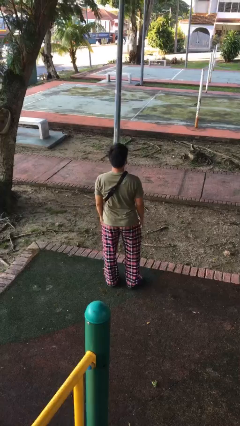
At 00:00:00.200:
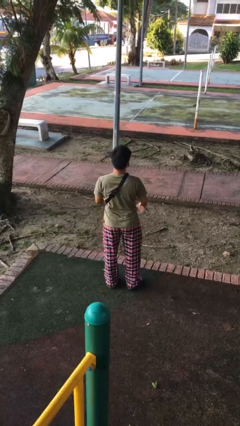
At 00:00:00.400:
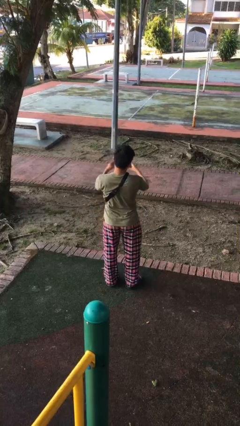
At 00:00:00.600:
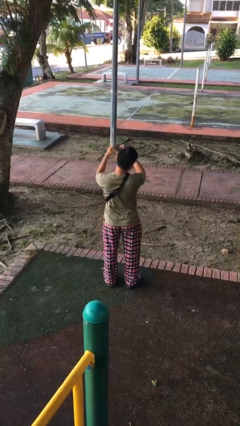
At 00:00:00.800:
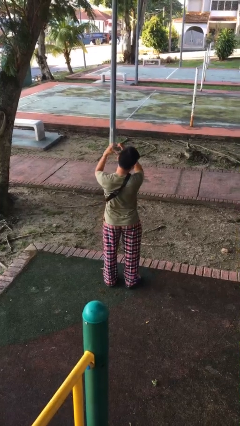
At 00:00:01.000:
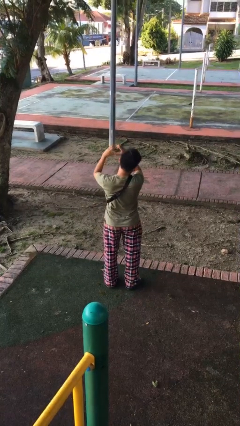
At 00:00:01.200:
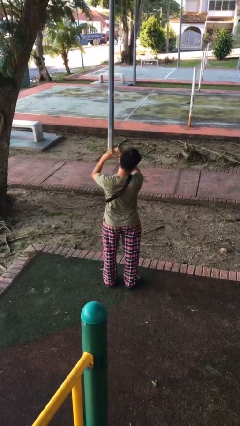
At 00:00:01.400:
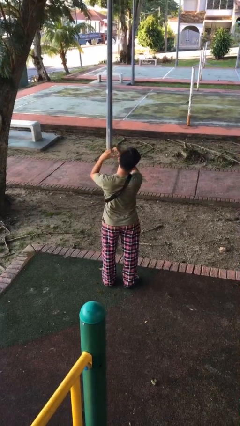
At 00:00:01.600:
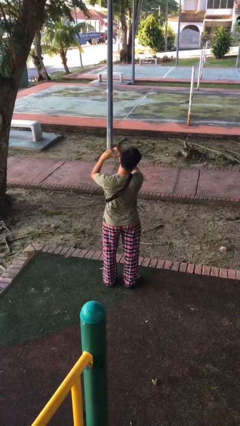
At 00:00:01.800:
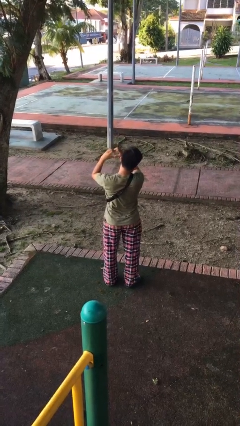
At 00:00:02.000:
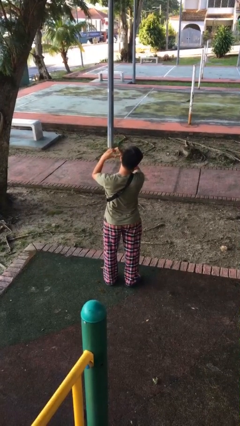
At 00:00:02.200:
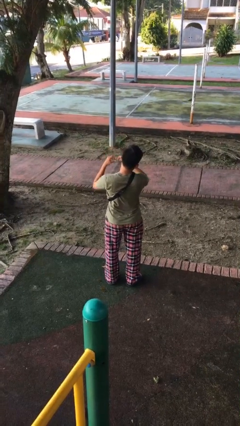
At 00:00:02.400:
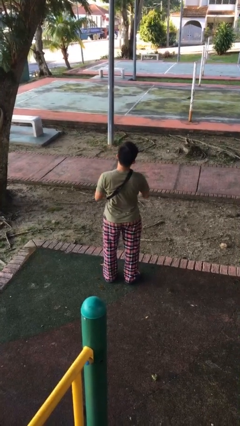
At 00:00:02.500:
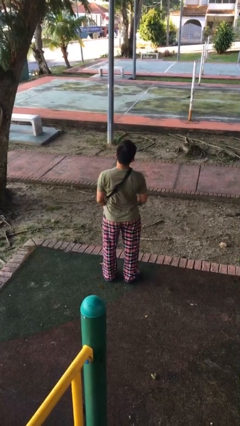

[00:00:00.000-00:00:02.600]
person gestures heart

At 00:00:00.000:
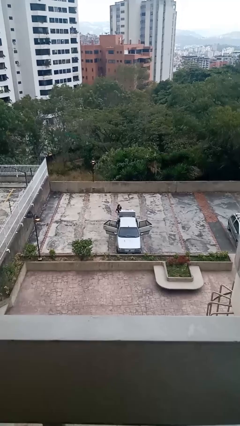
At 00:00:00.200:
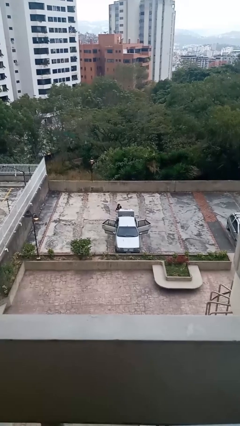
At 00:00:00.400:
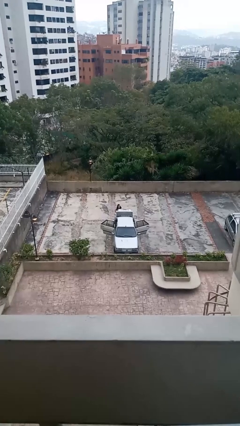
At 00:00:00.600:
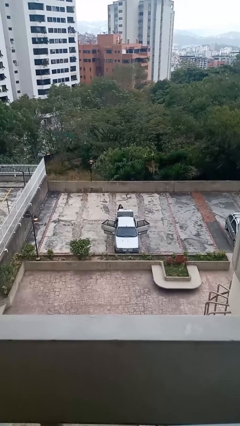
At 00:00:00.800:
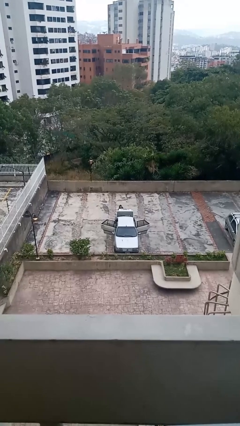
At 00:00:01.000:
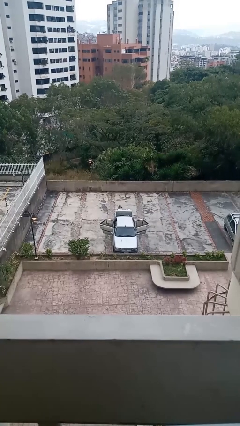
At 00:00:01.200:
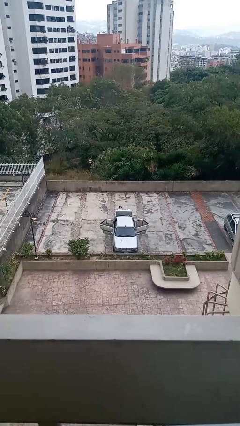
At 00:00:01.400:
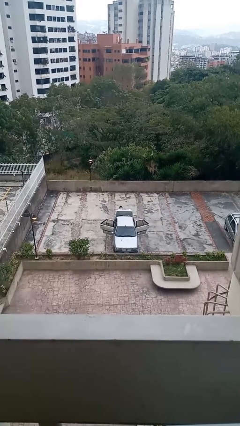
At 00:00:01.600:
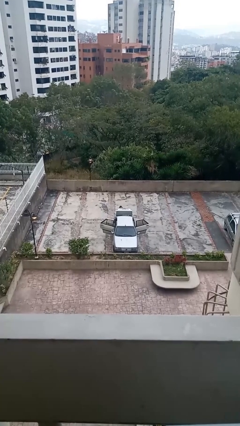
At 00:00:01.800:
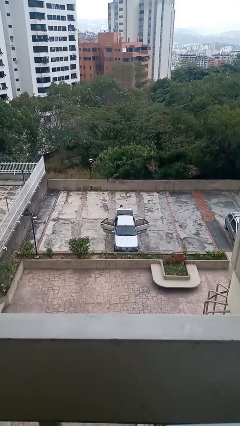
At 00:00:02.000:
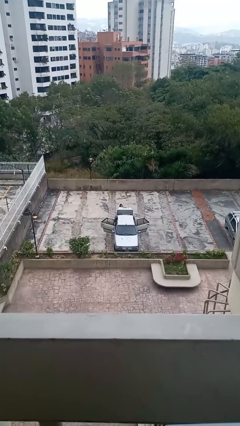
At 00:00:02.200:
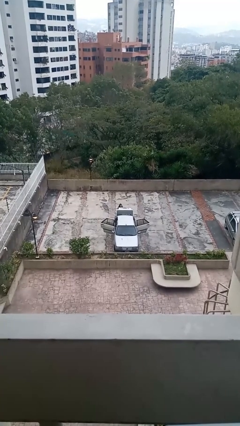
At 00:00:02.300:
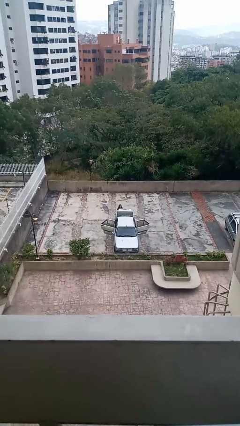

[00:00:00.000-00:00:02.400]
person loads car

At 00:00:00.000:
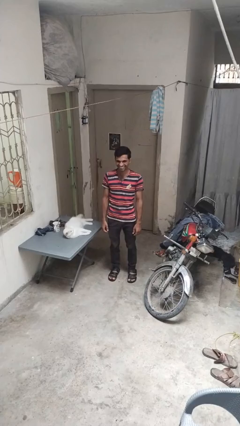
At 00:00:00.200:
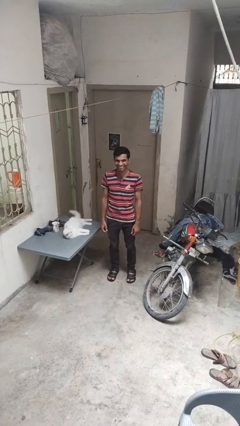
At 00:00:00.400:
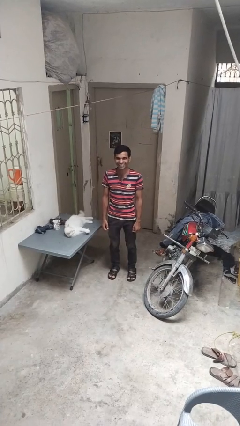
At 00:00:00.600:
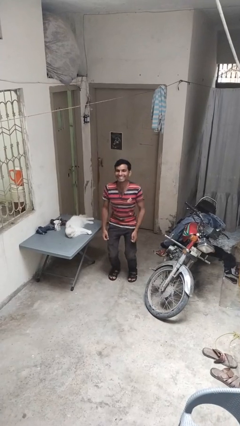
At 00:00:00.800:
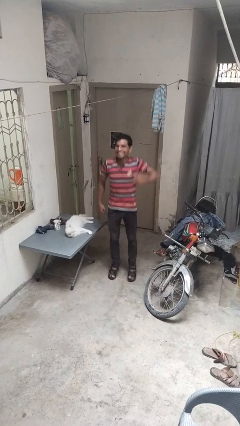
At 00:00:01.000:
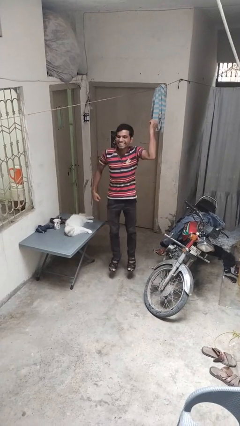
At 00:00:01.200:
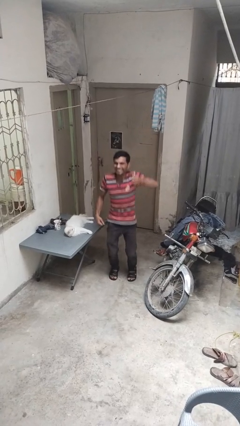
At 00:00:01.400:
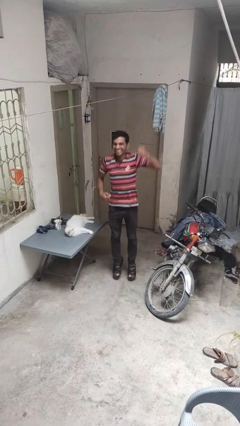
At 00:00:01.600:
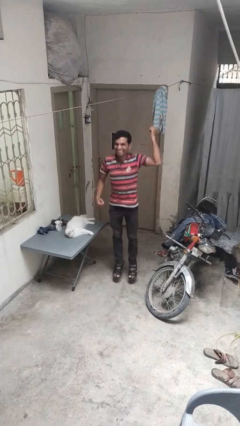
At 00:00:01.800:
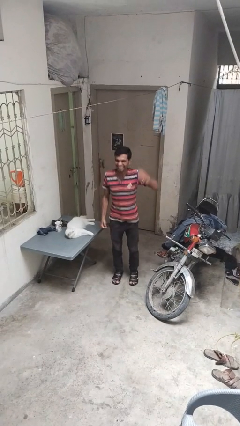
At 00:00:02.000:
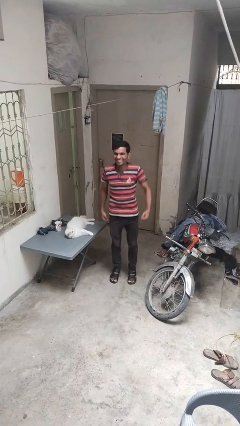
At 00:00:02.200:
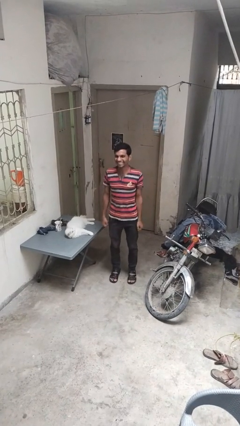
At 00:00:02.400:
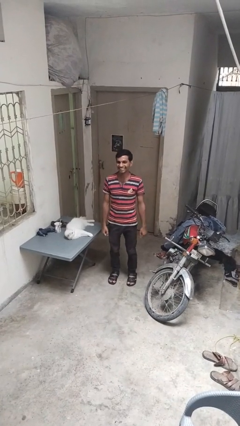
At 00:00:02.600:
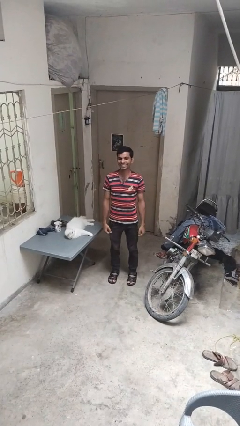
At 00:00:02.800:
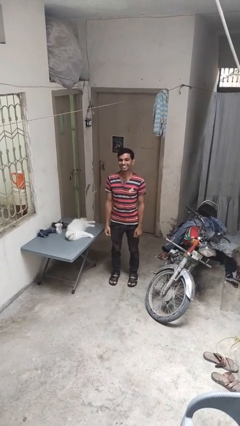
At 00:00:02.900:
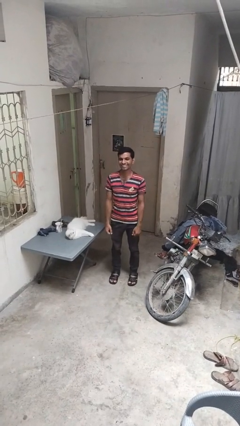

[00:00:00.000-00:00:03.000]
person jumps

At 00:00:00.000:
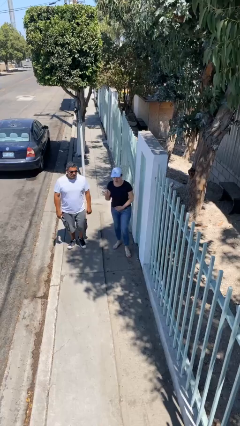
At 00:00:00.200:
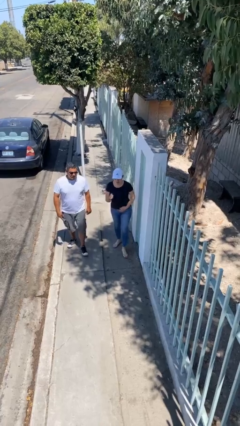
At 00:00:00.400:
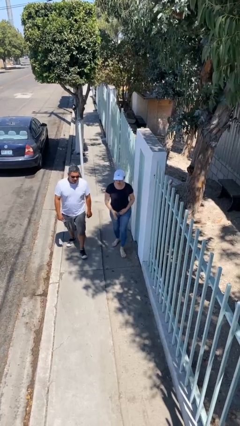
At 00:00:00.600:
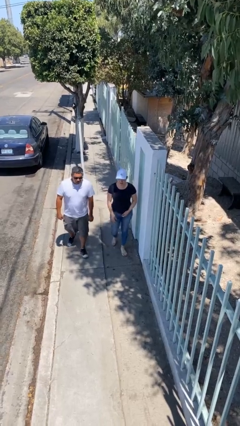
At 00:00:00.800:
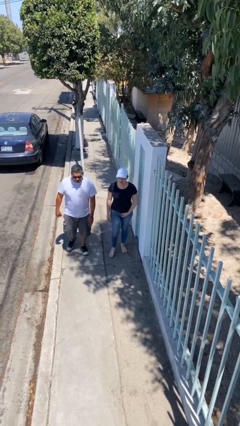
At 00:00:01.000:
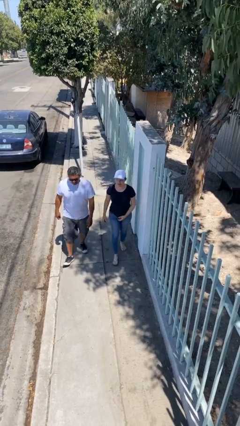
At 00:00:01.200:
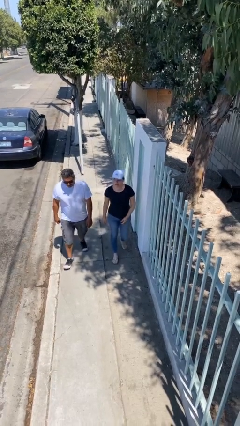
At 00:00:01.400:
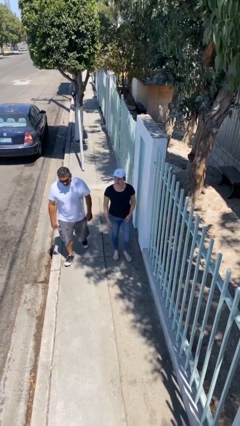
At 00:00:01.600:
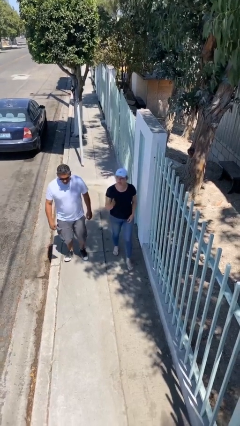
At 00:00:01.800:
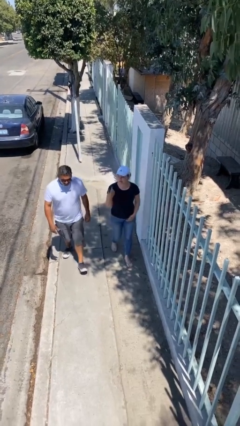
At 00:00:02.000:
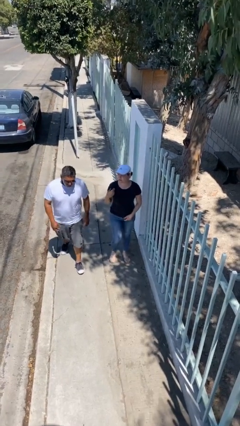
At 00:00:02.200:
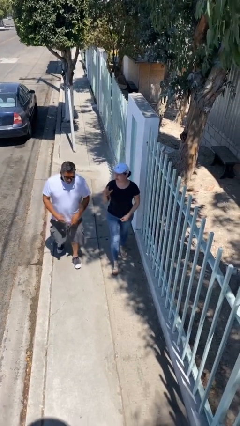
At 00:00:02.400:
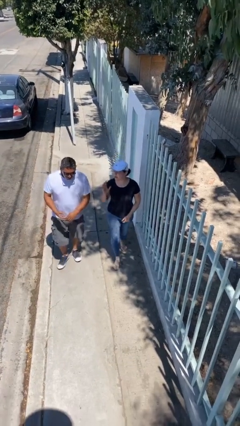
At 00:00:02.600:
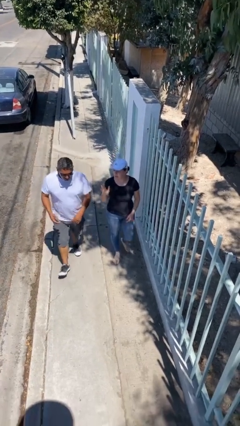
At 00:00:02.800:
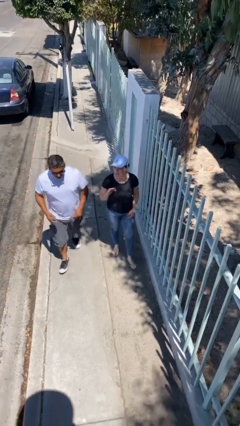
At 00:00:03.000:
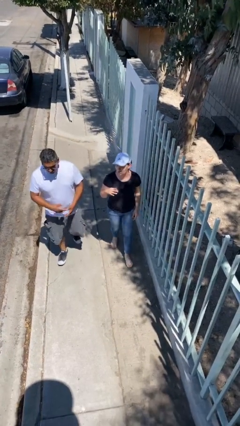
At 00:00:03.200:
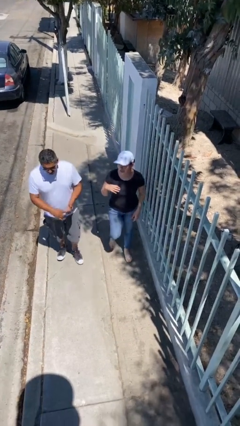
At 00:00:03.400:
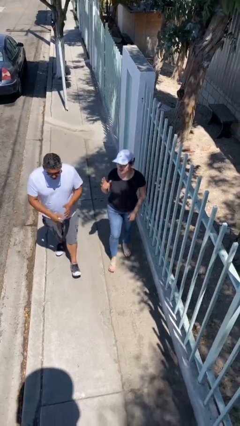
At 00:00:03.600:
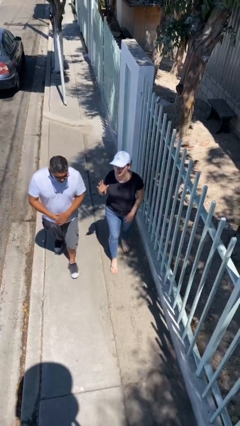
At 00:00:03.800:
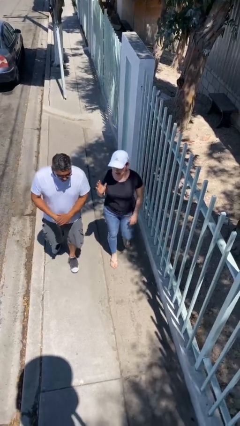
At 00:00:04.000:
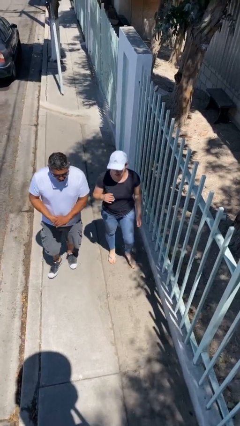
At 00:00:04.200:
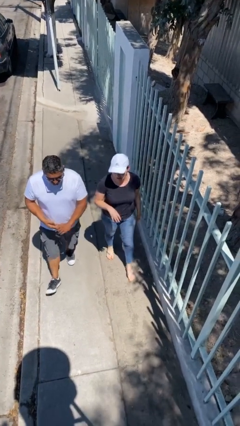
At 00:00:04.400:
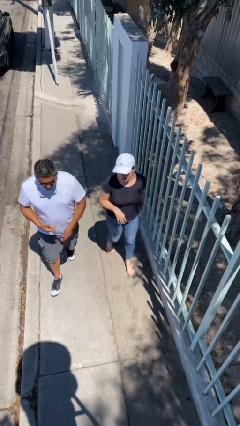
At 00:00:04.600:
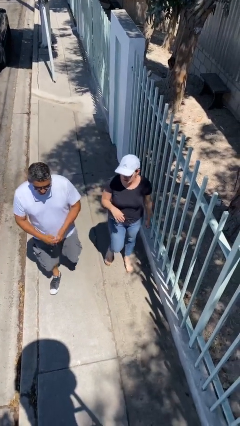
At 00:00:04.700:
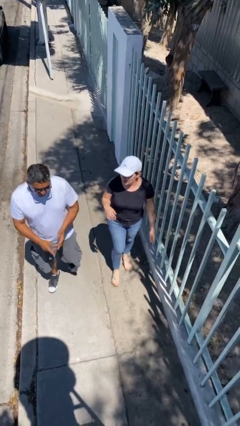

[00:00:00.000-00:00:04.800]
person talks to person

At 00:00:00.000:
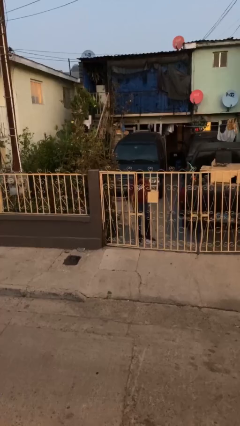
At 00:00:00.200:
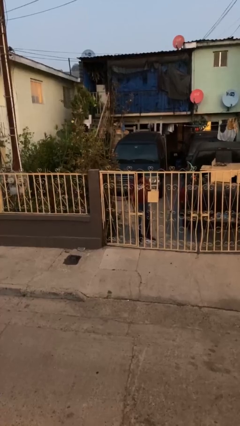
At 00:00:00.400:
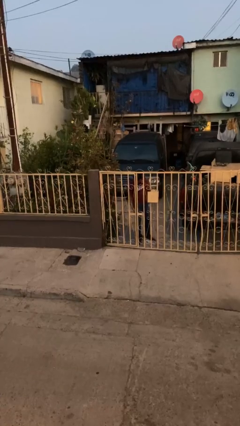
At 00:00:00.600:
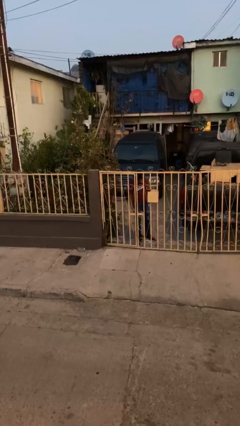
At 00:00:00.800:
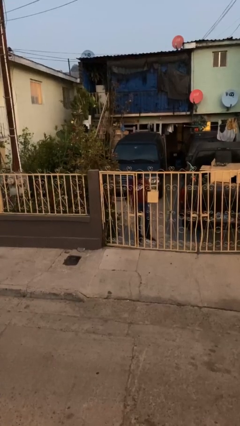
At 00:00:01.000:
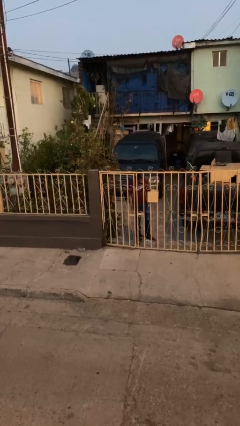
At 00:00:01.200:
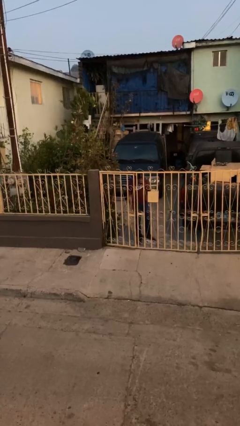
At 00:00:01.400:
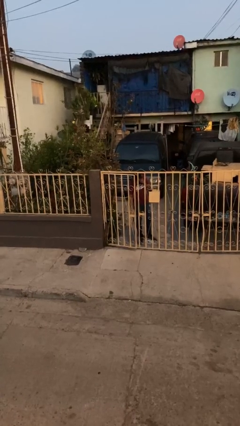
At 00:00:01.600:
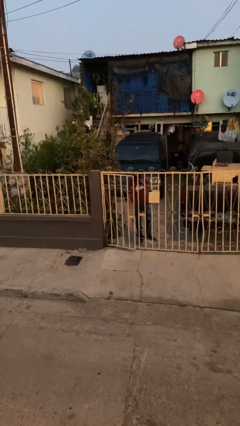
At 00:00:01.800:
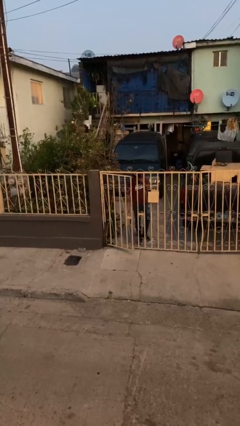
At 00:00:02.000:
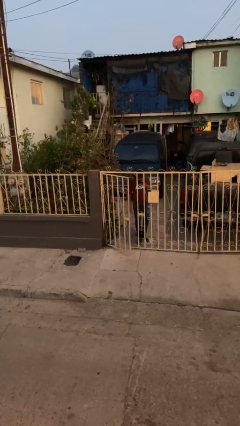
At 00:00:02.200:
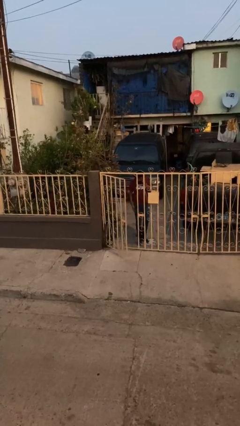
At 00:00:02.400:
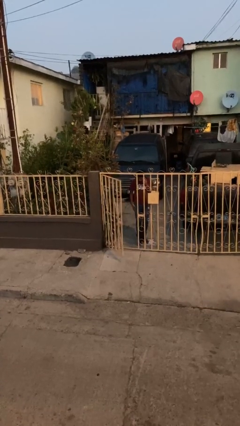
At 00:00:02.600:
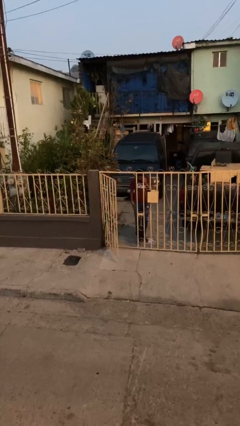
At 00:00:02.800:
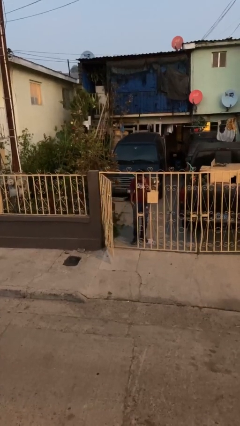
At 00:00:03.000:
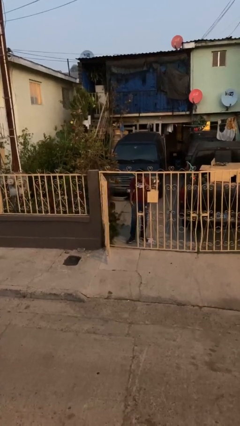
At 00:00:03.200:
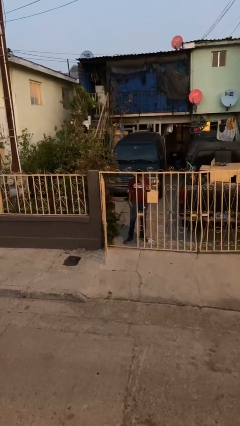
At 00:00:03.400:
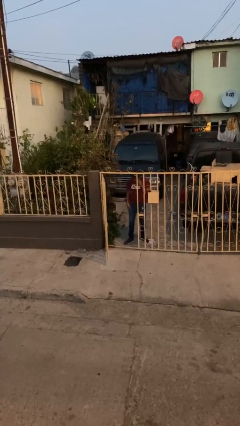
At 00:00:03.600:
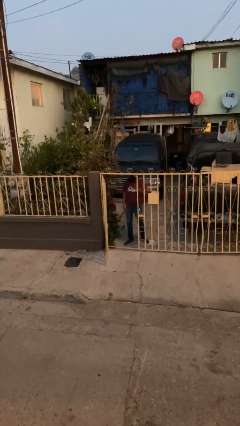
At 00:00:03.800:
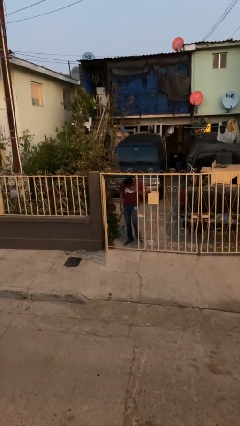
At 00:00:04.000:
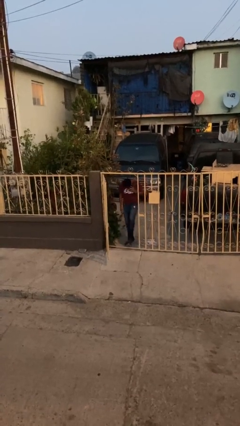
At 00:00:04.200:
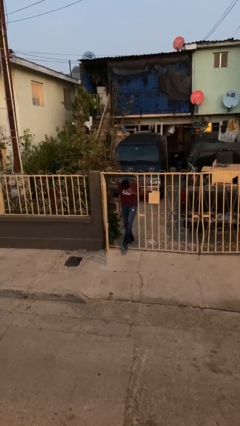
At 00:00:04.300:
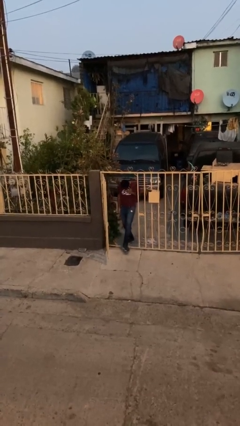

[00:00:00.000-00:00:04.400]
person opens facility door

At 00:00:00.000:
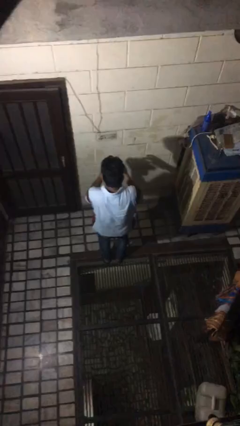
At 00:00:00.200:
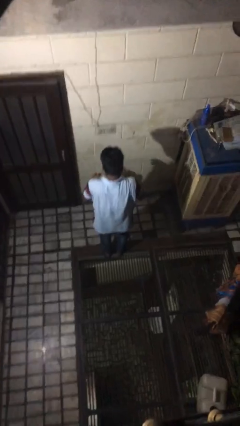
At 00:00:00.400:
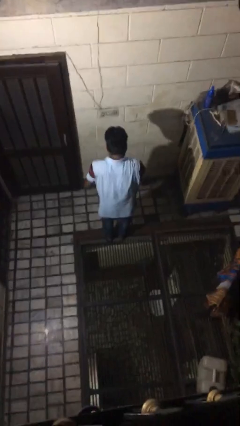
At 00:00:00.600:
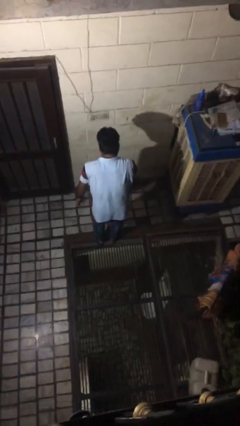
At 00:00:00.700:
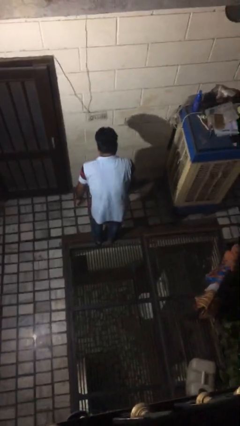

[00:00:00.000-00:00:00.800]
person catches dropped object
